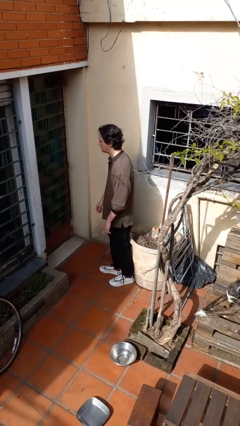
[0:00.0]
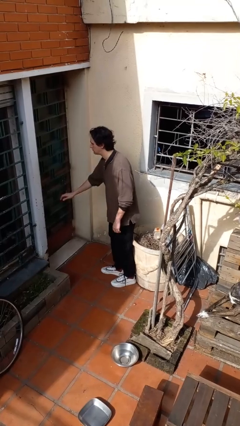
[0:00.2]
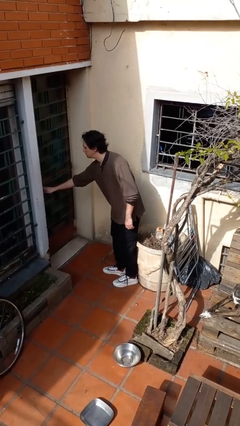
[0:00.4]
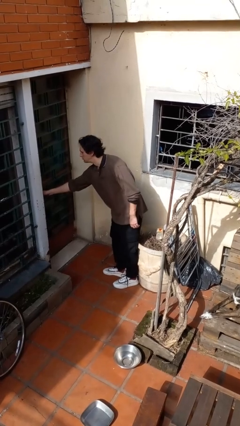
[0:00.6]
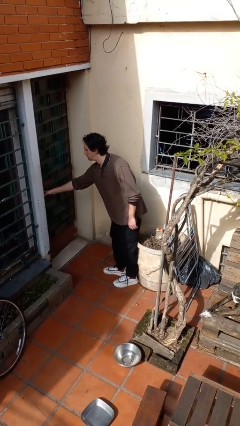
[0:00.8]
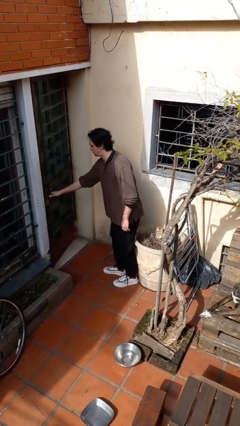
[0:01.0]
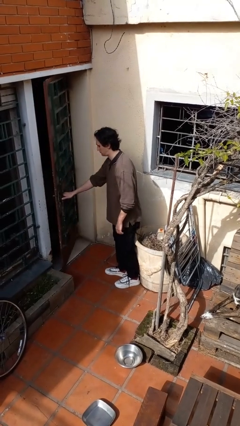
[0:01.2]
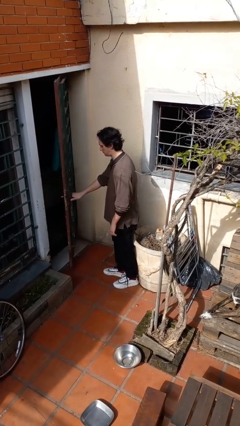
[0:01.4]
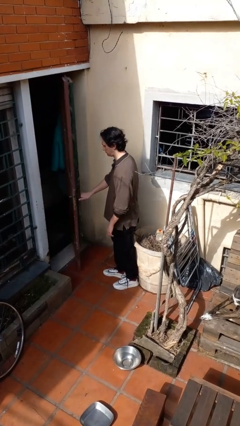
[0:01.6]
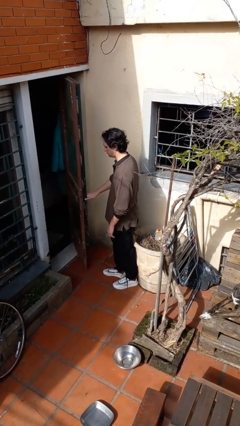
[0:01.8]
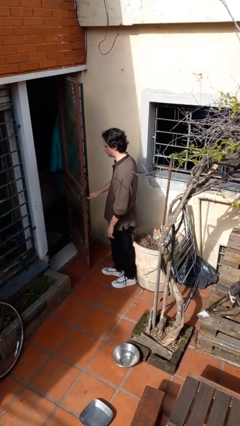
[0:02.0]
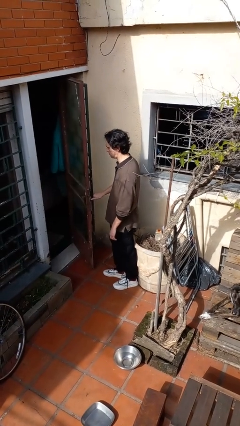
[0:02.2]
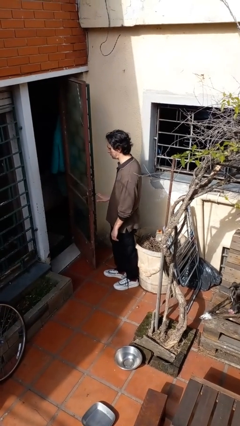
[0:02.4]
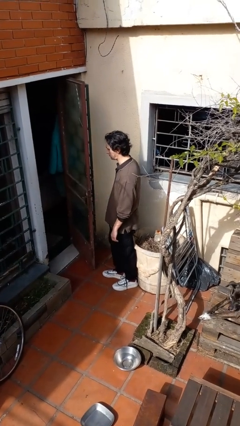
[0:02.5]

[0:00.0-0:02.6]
person opens facility door

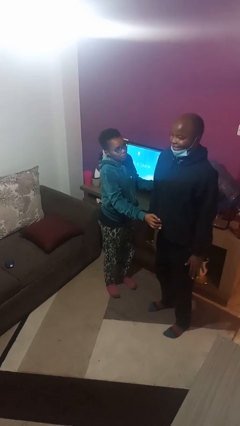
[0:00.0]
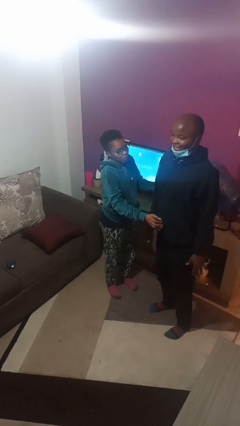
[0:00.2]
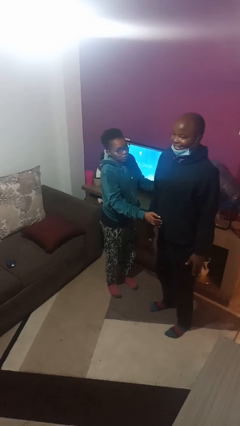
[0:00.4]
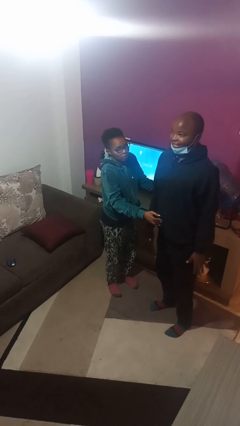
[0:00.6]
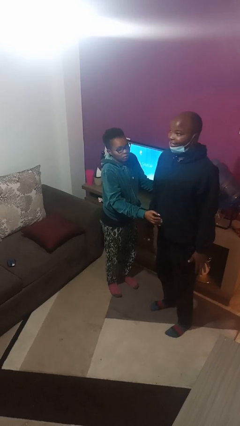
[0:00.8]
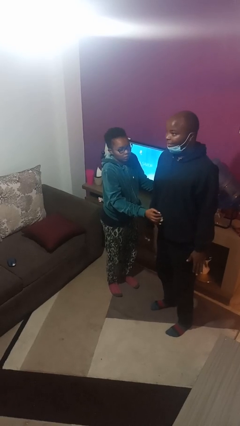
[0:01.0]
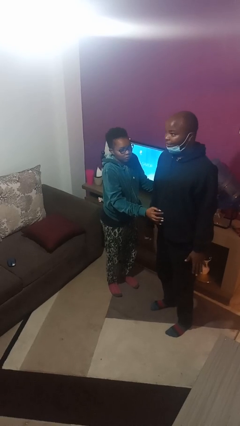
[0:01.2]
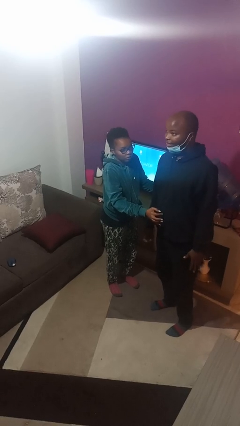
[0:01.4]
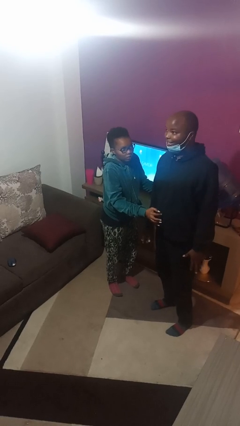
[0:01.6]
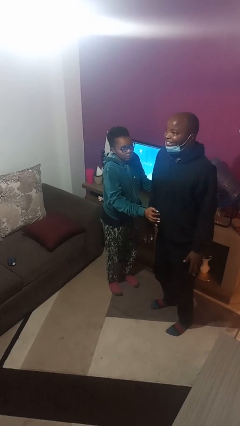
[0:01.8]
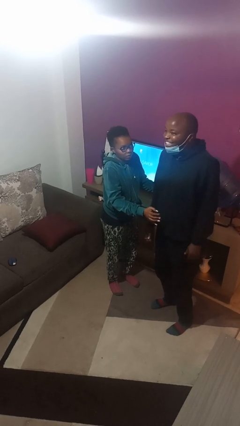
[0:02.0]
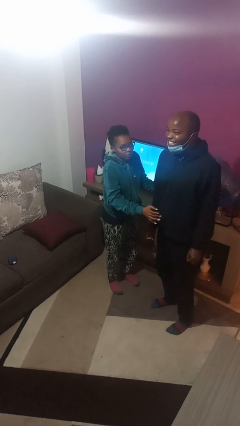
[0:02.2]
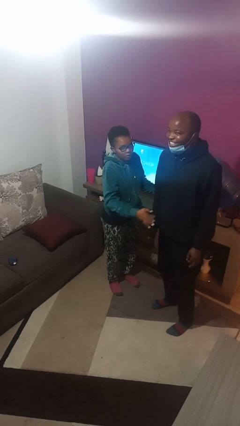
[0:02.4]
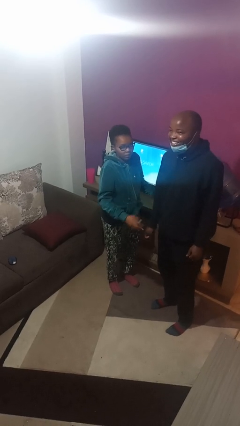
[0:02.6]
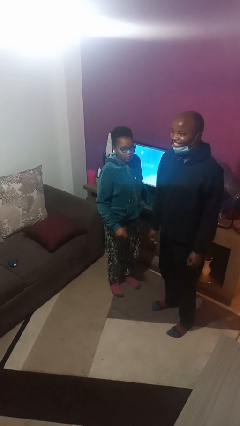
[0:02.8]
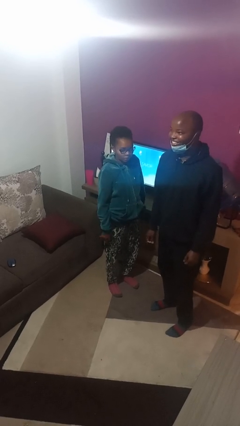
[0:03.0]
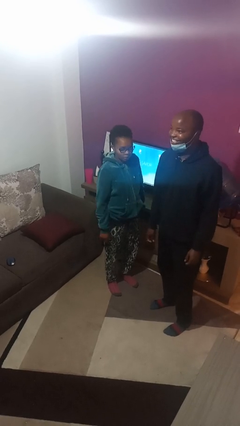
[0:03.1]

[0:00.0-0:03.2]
person tickles person

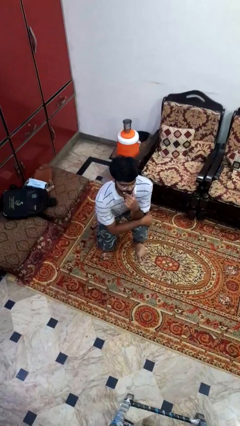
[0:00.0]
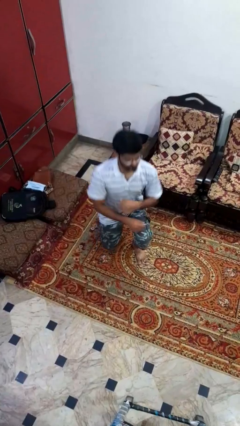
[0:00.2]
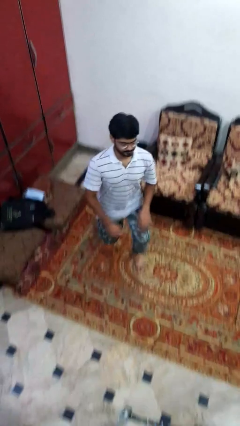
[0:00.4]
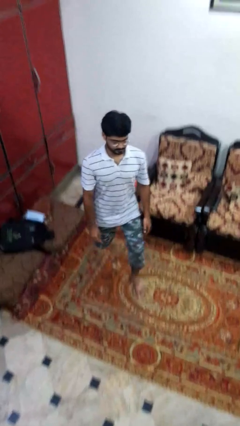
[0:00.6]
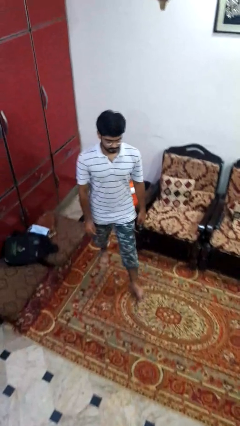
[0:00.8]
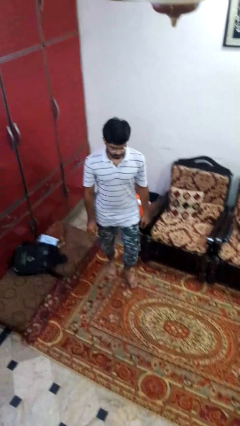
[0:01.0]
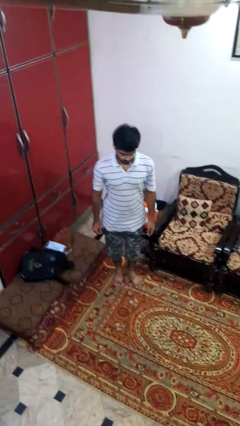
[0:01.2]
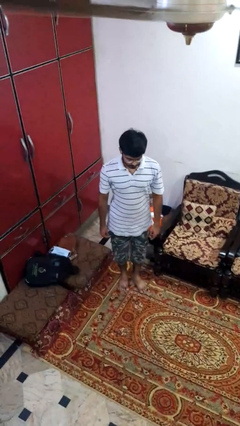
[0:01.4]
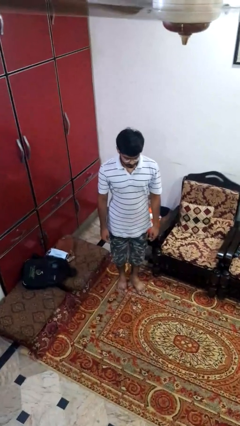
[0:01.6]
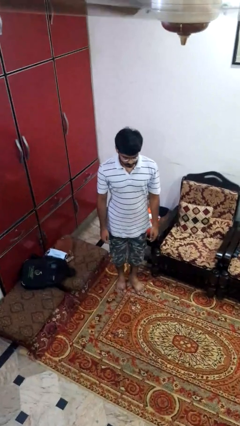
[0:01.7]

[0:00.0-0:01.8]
person stands up from floor

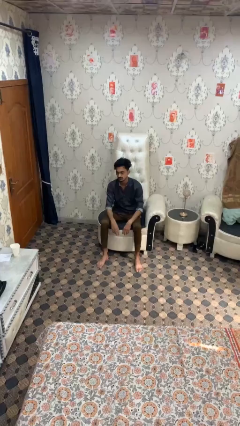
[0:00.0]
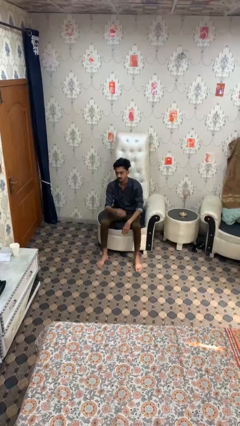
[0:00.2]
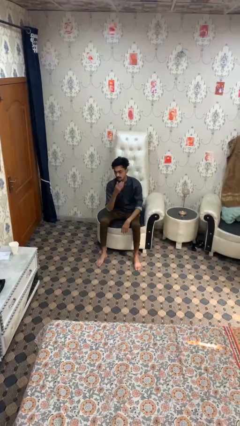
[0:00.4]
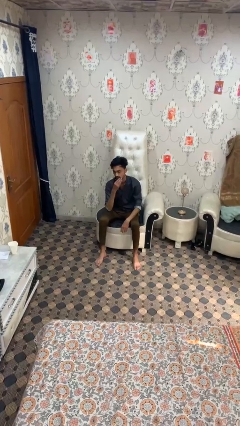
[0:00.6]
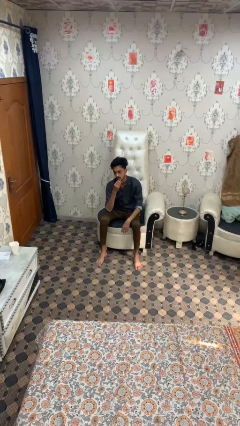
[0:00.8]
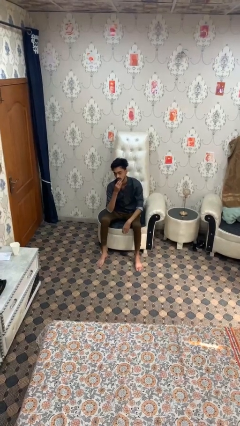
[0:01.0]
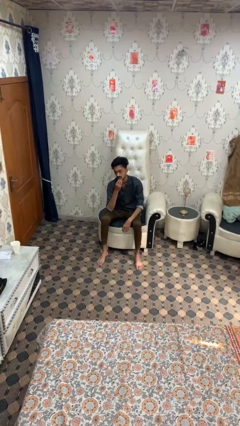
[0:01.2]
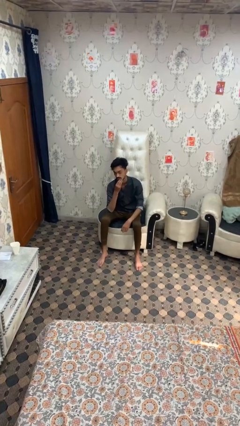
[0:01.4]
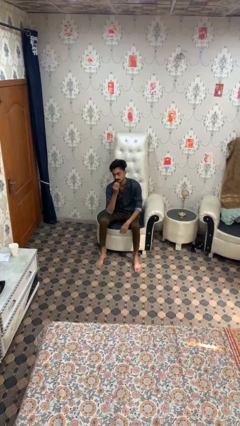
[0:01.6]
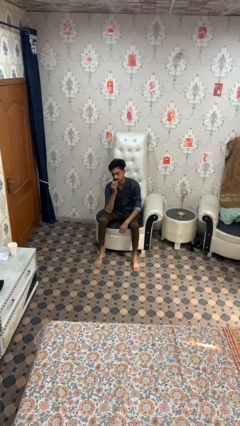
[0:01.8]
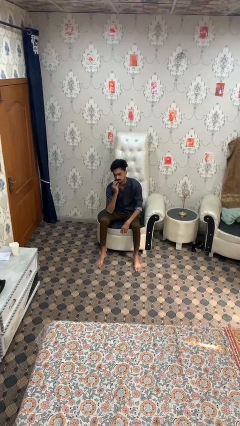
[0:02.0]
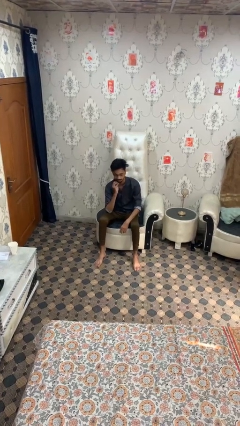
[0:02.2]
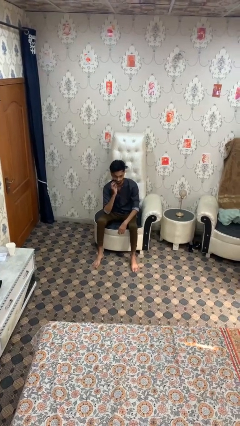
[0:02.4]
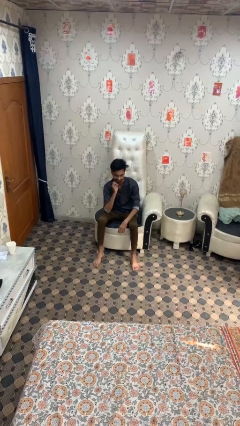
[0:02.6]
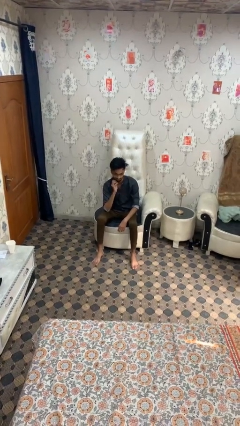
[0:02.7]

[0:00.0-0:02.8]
person strokes chin

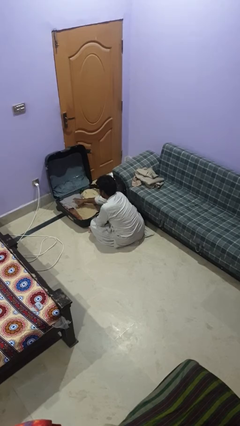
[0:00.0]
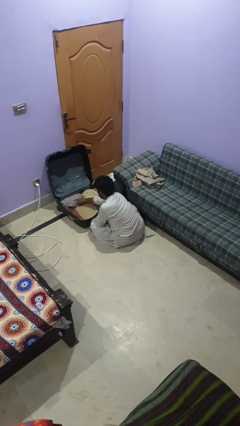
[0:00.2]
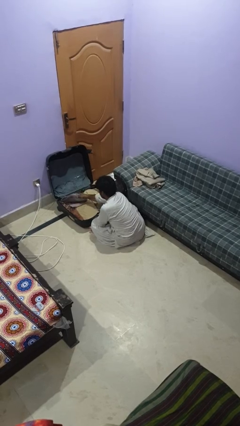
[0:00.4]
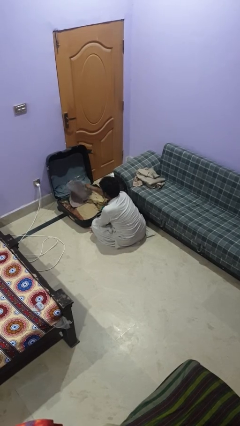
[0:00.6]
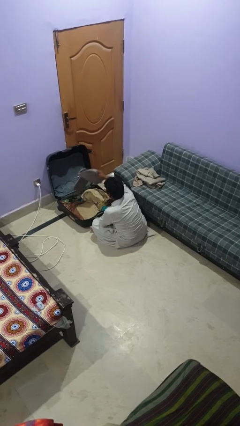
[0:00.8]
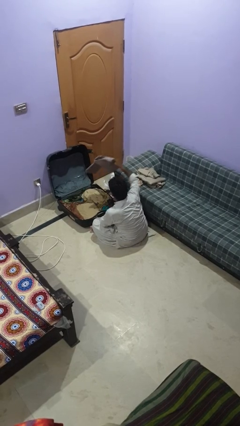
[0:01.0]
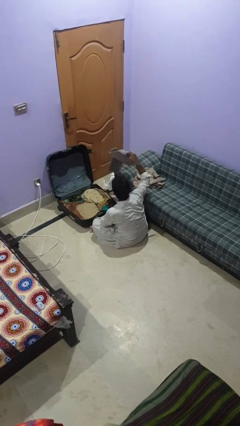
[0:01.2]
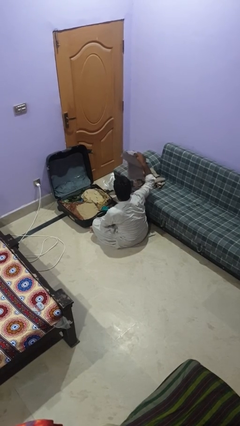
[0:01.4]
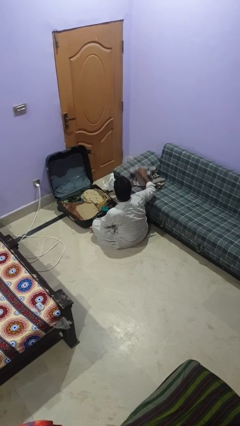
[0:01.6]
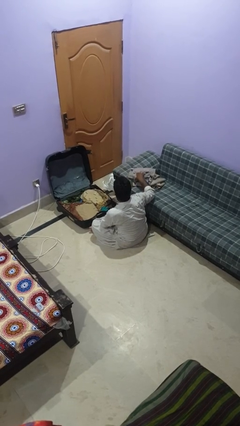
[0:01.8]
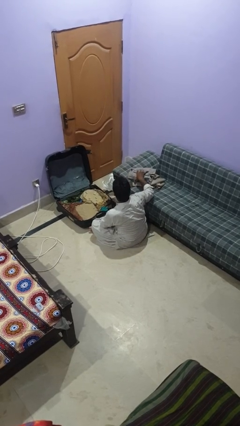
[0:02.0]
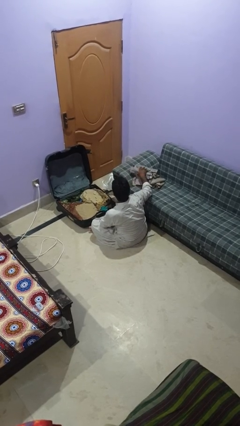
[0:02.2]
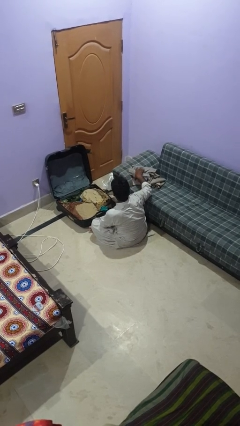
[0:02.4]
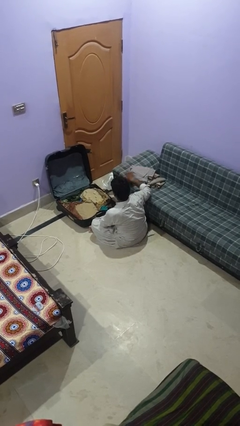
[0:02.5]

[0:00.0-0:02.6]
person unloads clothes from suitcase

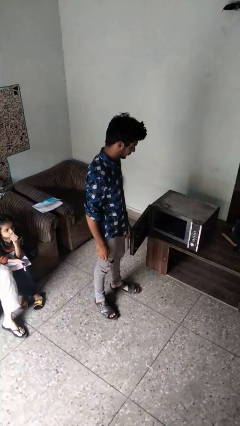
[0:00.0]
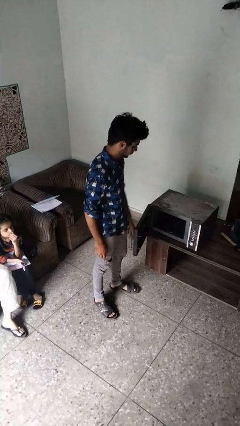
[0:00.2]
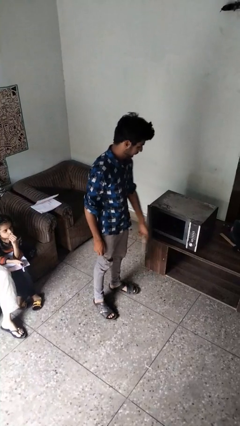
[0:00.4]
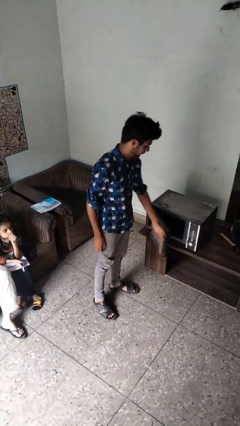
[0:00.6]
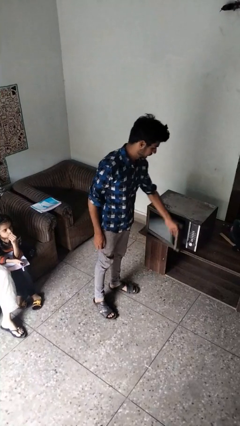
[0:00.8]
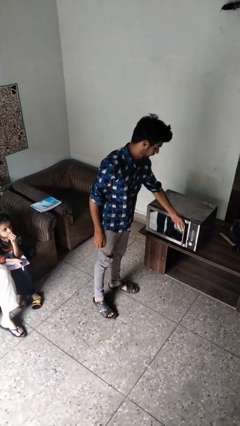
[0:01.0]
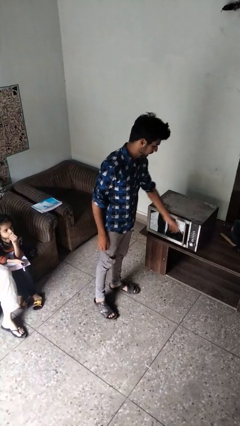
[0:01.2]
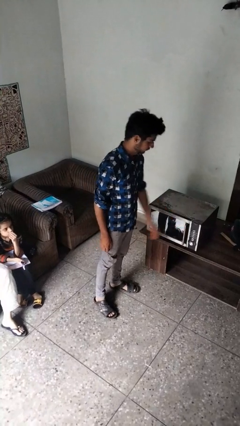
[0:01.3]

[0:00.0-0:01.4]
person closes microwave

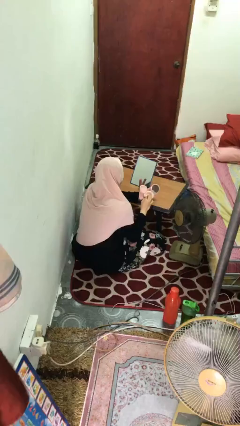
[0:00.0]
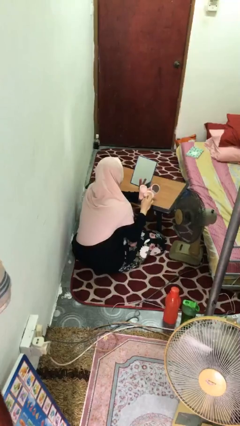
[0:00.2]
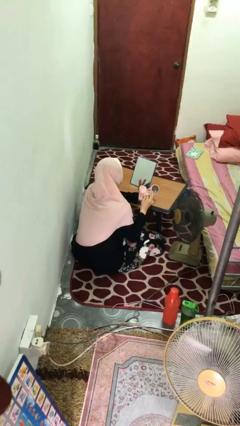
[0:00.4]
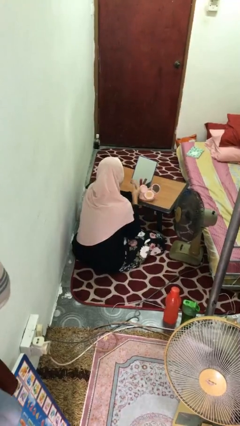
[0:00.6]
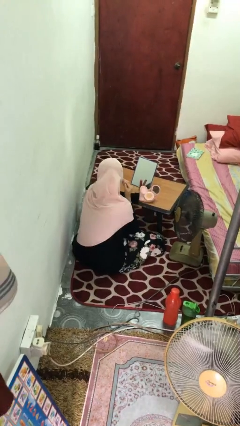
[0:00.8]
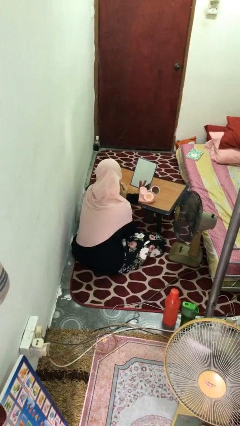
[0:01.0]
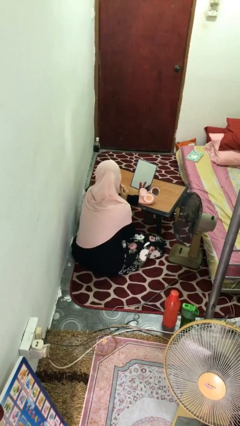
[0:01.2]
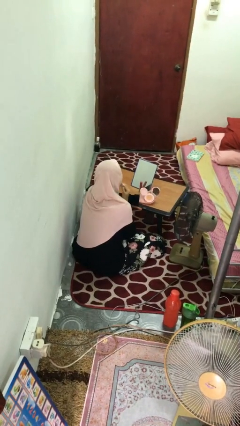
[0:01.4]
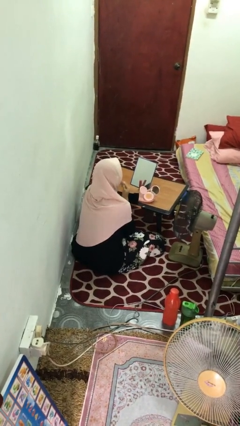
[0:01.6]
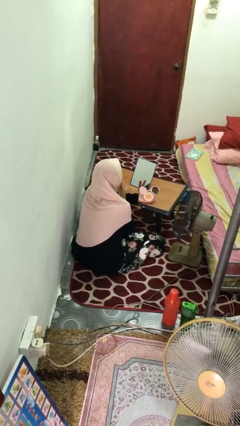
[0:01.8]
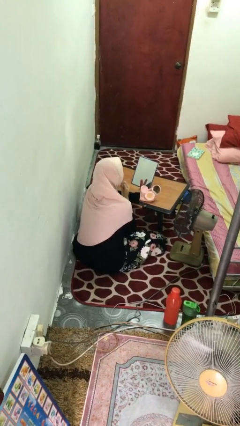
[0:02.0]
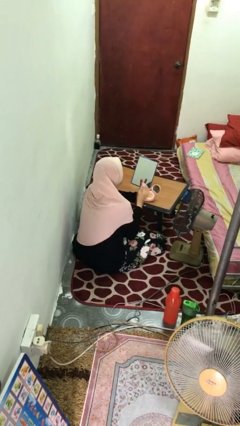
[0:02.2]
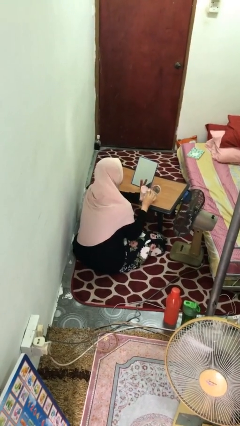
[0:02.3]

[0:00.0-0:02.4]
person applies foundation makeup
